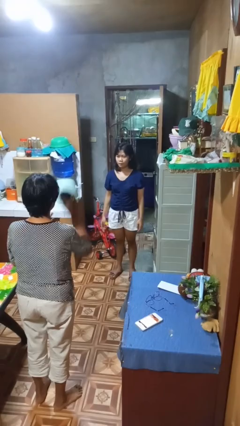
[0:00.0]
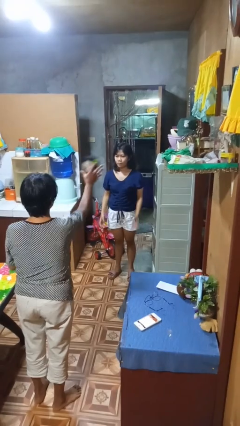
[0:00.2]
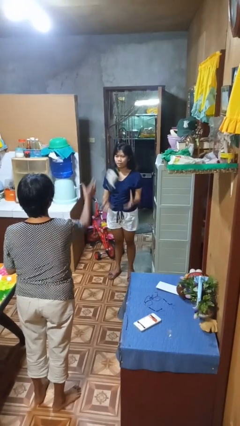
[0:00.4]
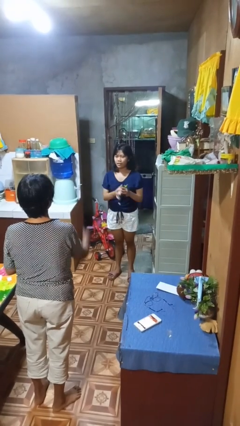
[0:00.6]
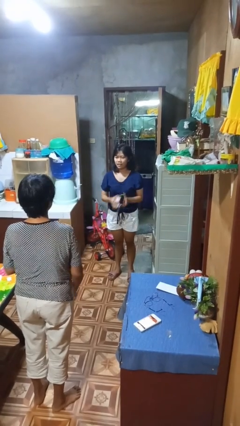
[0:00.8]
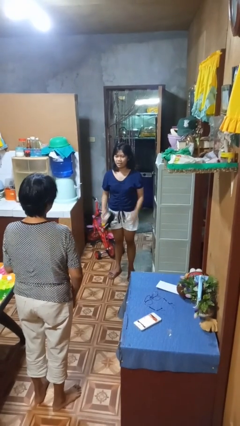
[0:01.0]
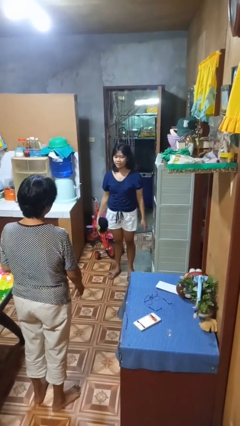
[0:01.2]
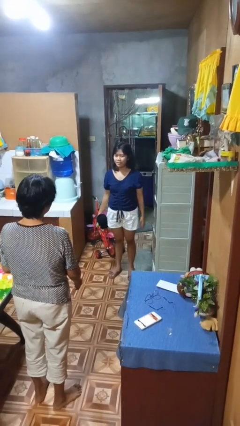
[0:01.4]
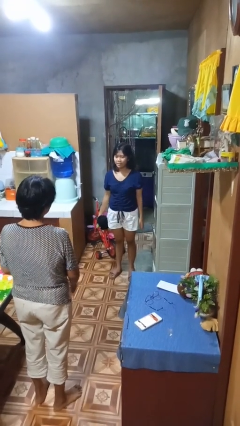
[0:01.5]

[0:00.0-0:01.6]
person catches object from person

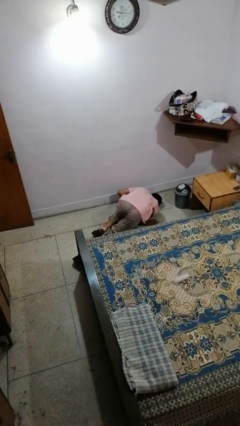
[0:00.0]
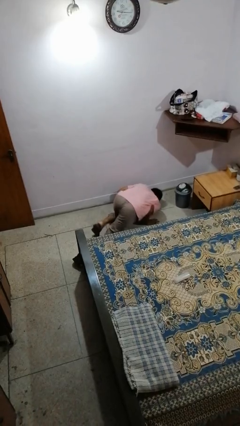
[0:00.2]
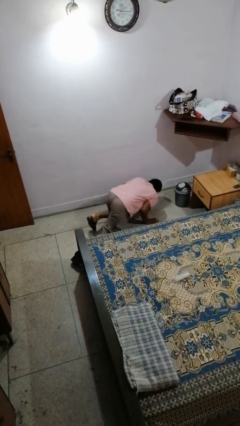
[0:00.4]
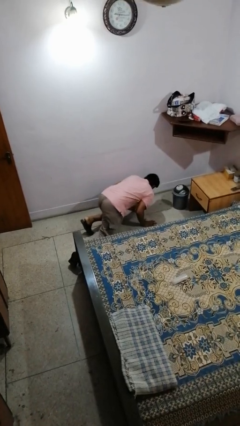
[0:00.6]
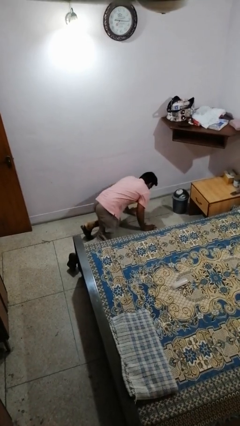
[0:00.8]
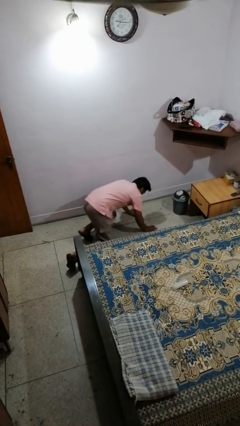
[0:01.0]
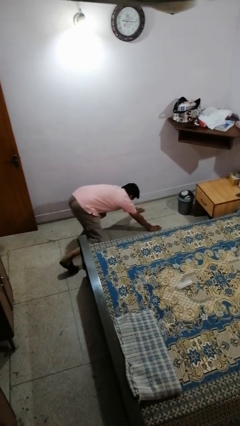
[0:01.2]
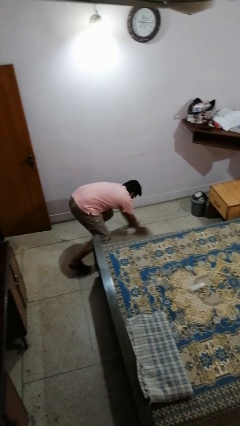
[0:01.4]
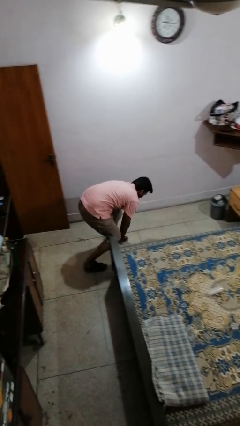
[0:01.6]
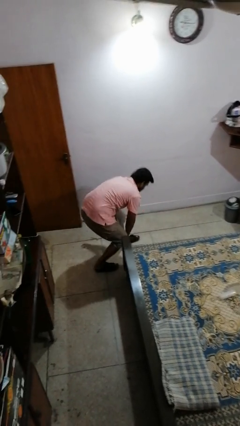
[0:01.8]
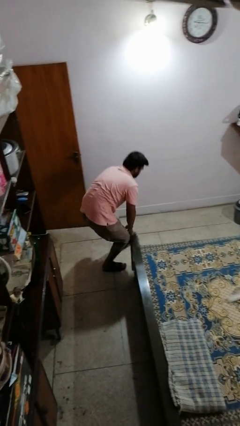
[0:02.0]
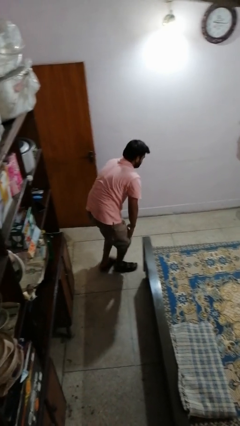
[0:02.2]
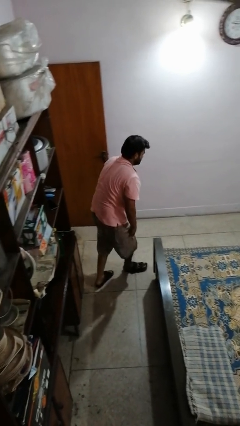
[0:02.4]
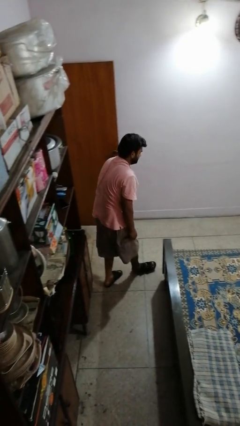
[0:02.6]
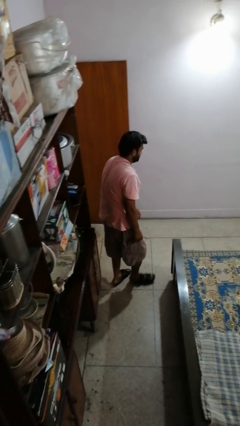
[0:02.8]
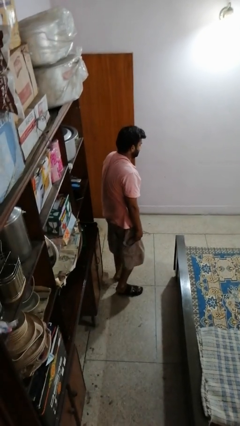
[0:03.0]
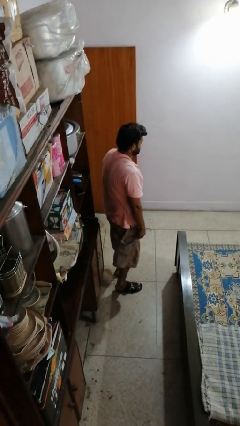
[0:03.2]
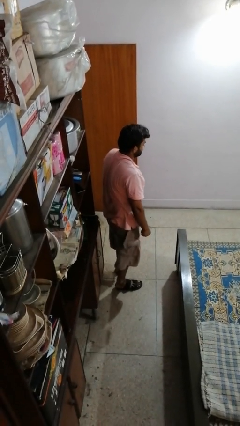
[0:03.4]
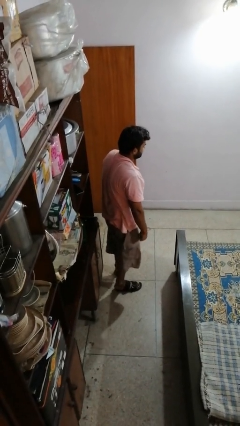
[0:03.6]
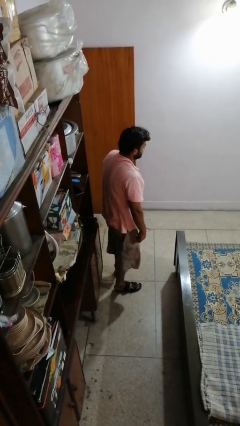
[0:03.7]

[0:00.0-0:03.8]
person stands up from floor

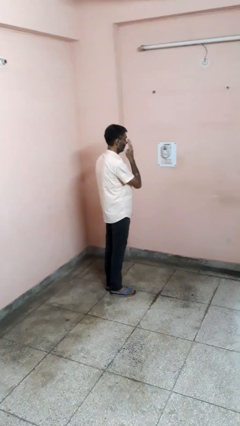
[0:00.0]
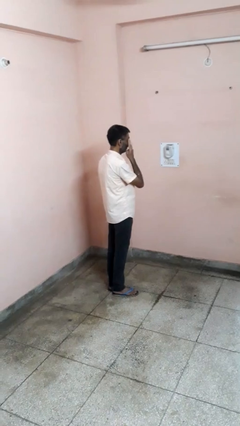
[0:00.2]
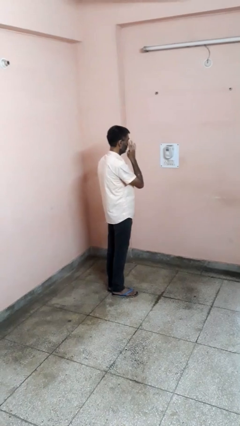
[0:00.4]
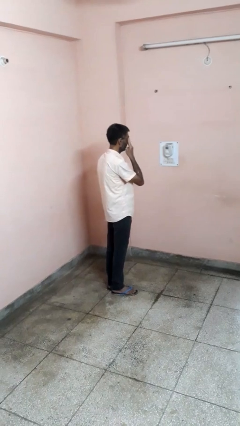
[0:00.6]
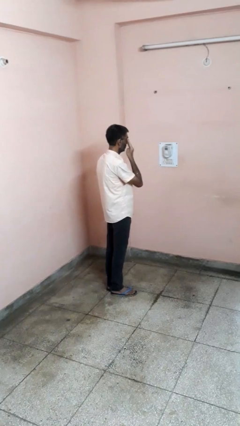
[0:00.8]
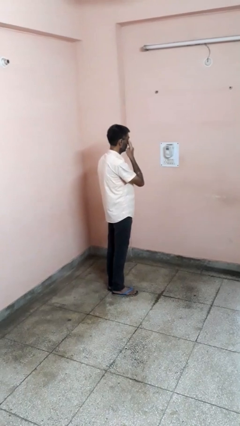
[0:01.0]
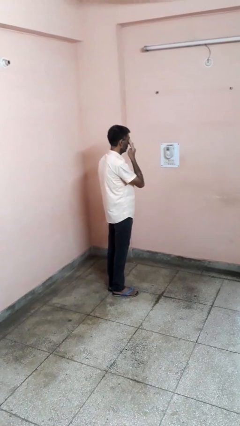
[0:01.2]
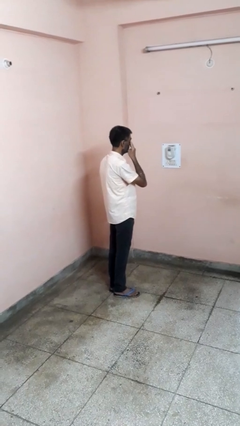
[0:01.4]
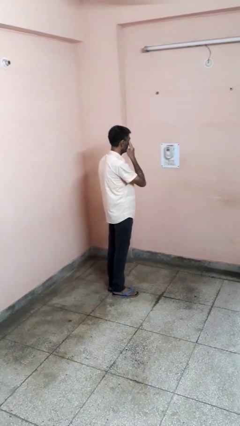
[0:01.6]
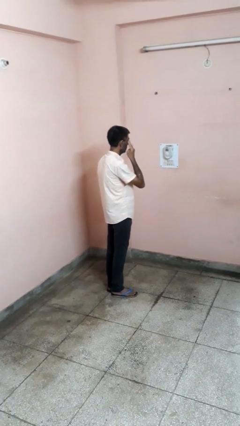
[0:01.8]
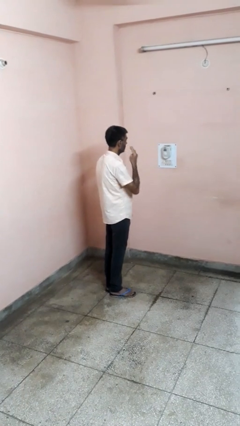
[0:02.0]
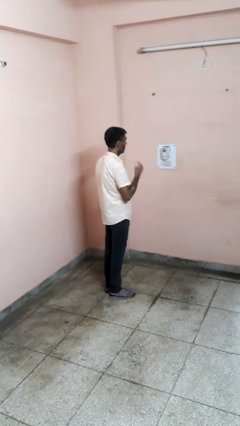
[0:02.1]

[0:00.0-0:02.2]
person rubs eyes

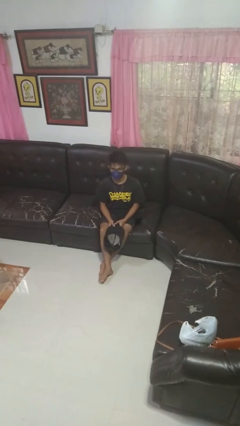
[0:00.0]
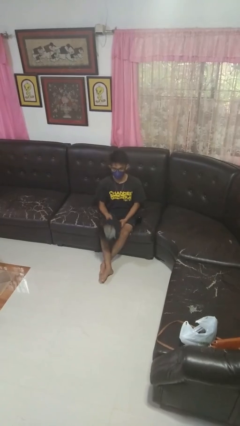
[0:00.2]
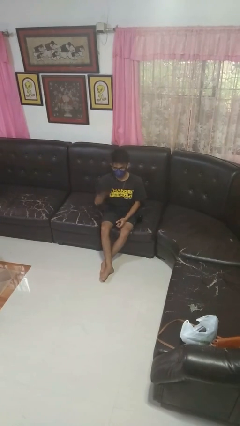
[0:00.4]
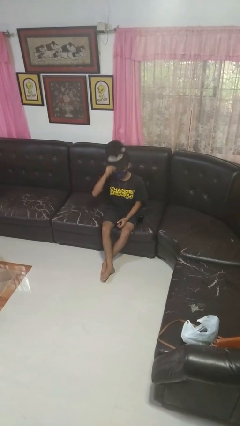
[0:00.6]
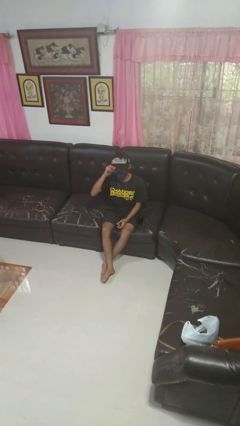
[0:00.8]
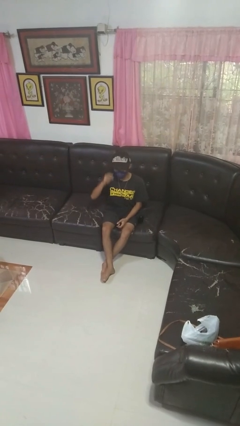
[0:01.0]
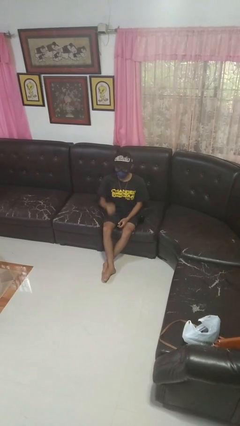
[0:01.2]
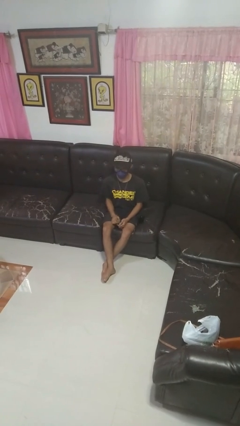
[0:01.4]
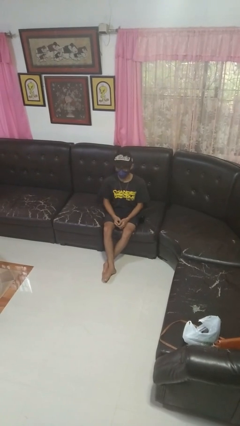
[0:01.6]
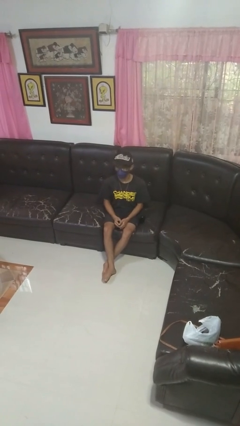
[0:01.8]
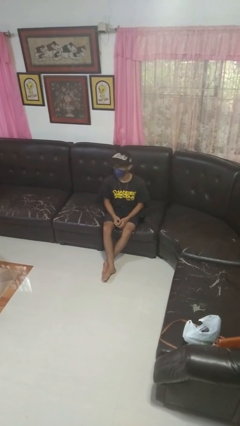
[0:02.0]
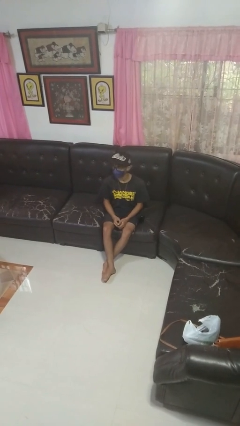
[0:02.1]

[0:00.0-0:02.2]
person puts on hat

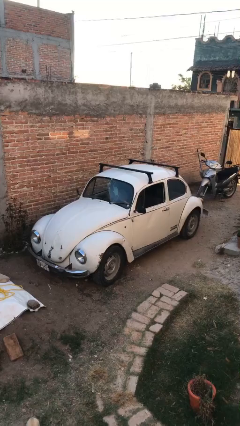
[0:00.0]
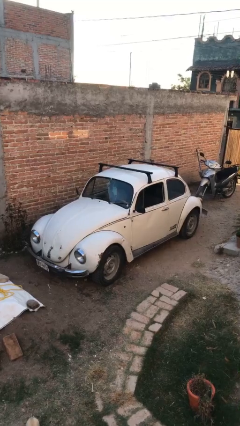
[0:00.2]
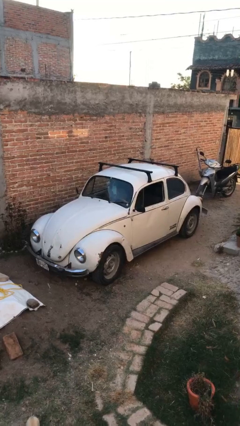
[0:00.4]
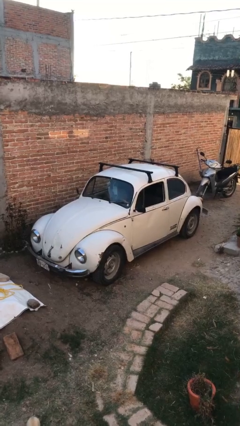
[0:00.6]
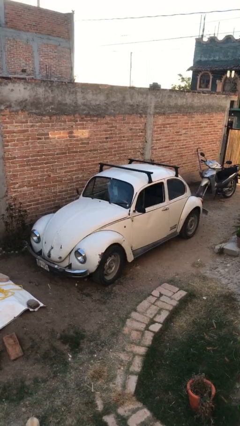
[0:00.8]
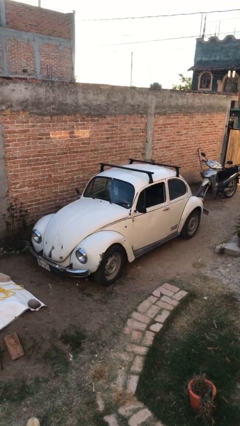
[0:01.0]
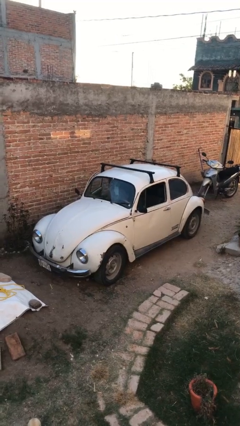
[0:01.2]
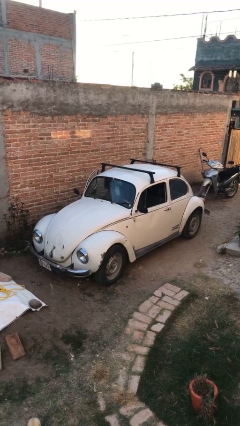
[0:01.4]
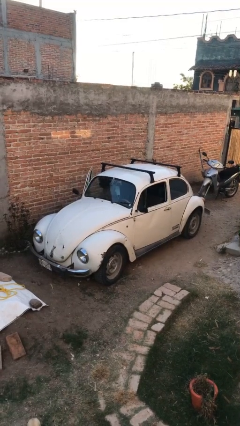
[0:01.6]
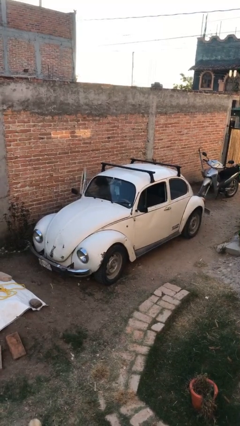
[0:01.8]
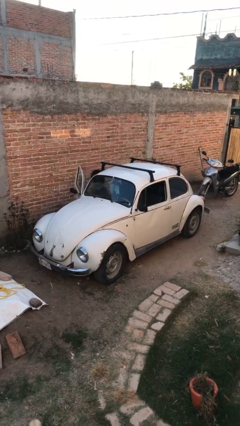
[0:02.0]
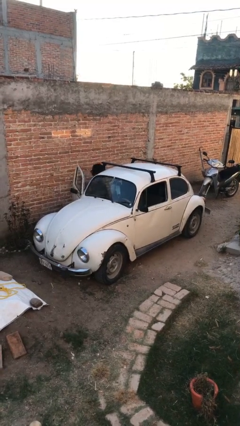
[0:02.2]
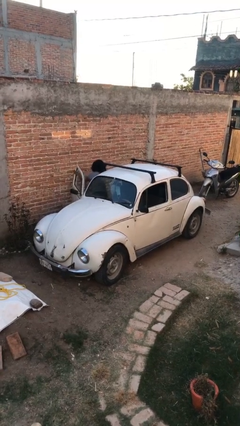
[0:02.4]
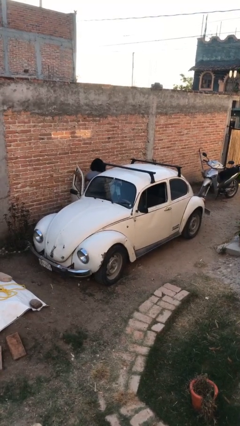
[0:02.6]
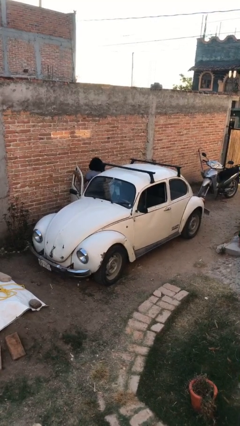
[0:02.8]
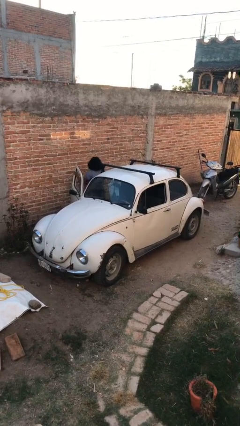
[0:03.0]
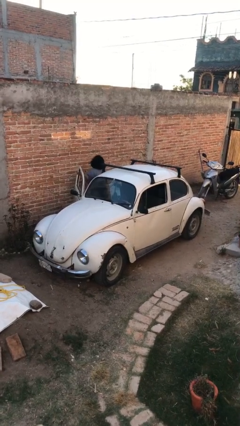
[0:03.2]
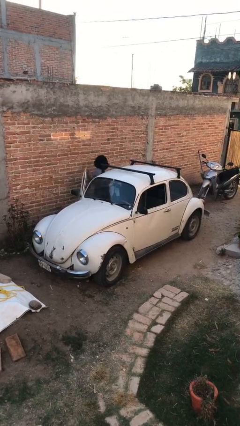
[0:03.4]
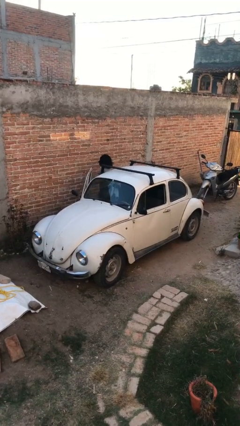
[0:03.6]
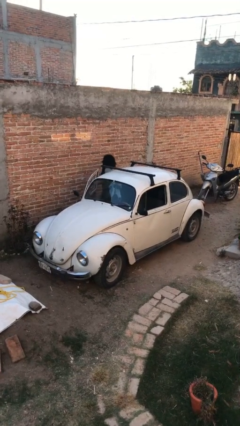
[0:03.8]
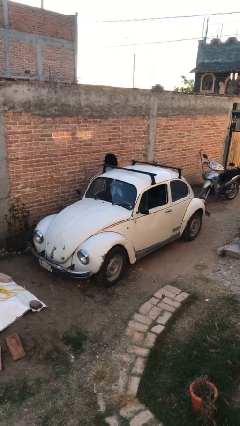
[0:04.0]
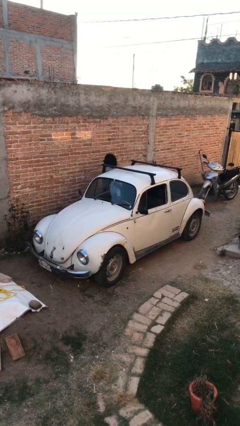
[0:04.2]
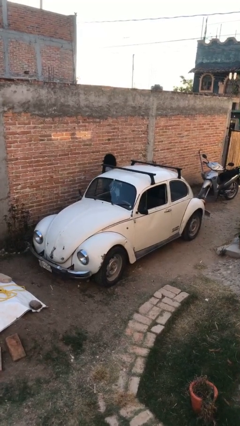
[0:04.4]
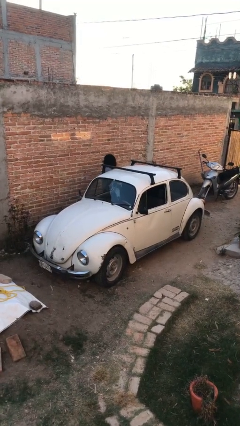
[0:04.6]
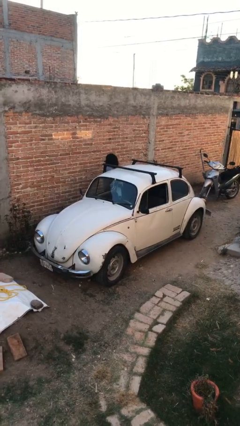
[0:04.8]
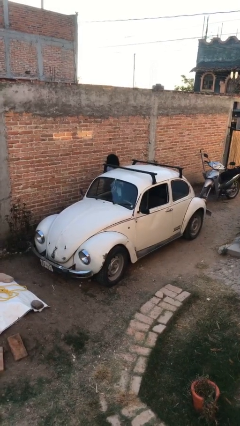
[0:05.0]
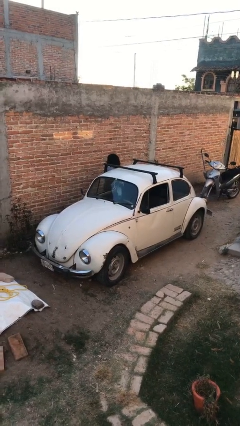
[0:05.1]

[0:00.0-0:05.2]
car drops off person

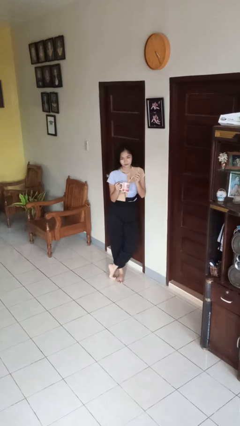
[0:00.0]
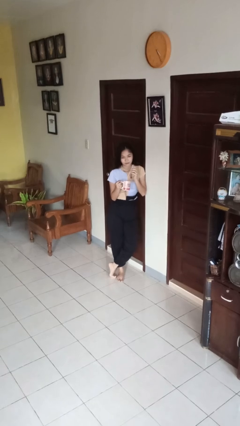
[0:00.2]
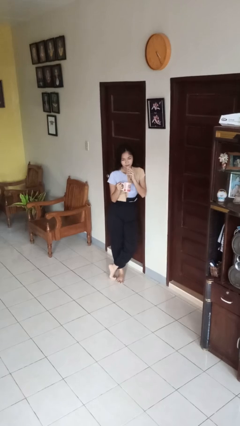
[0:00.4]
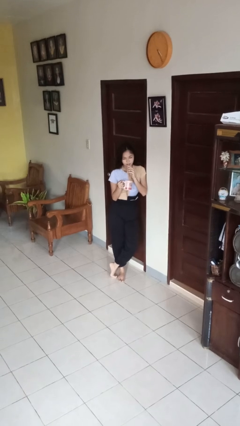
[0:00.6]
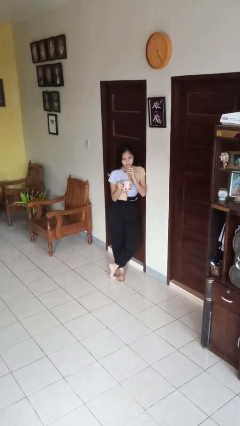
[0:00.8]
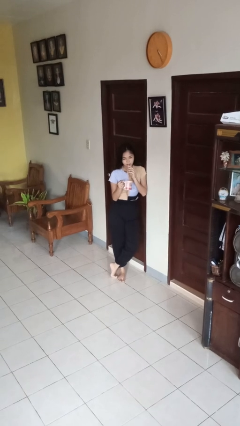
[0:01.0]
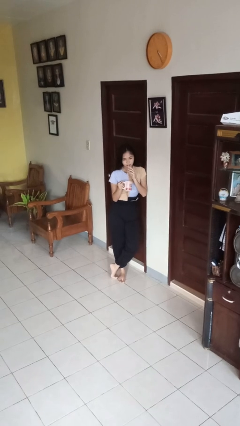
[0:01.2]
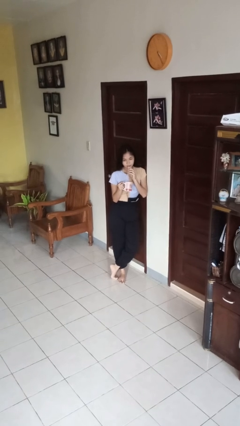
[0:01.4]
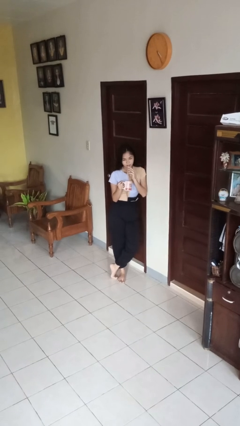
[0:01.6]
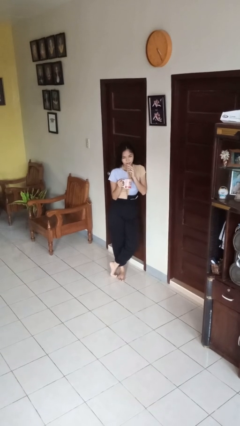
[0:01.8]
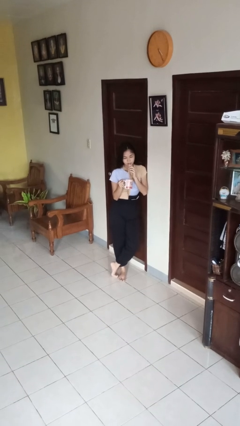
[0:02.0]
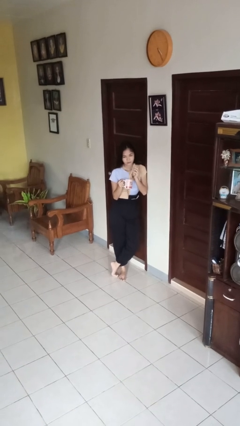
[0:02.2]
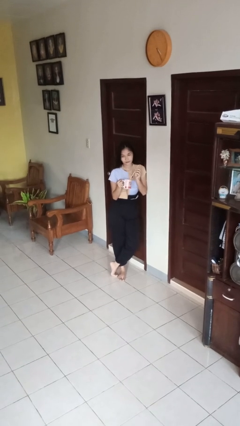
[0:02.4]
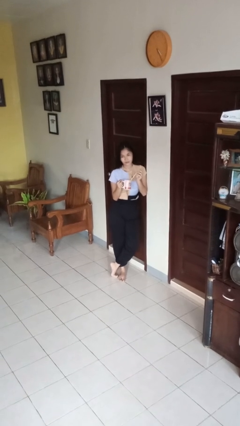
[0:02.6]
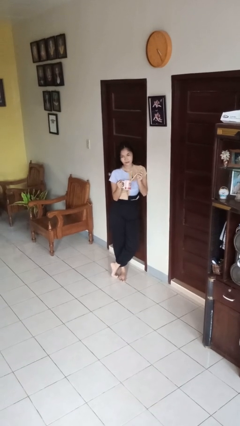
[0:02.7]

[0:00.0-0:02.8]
person drinks from straw
